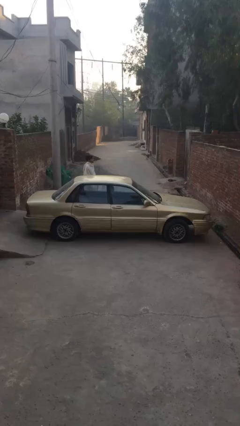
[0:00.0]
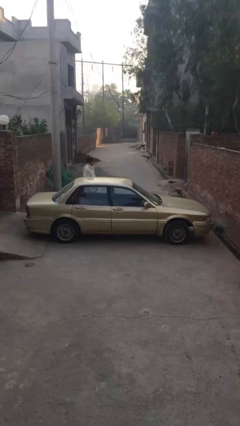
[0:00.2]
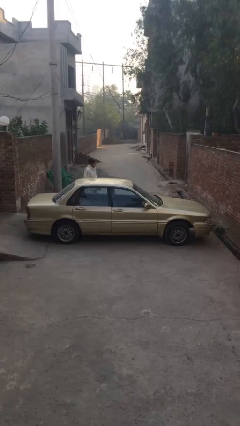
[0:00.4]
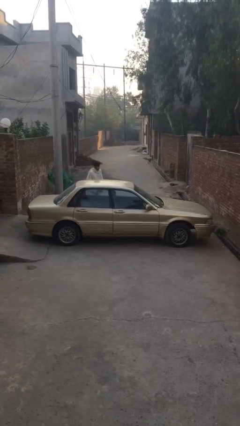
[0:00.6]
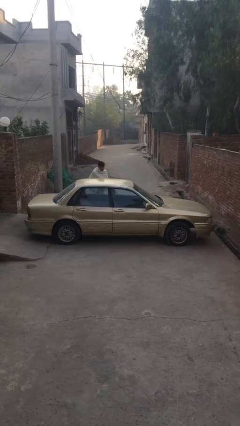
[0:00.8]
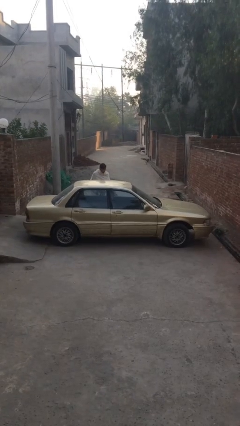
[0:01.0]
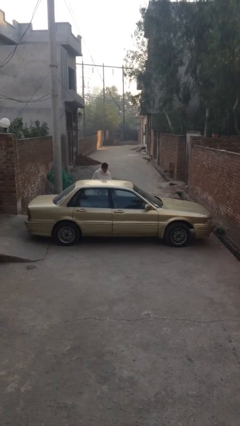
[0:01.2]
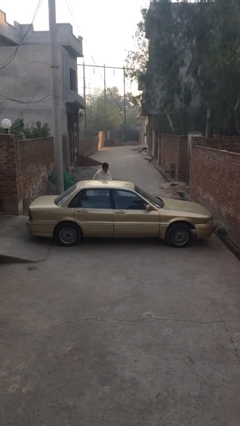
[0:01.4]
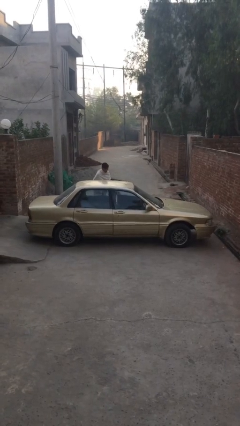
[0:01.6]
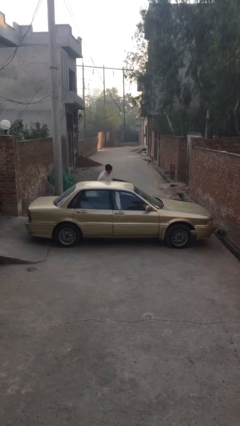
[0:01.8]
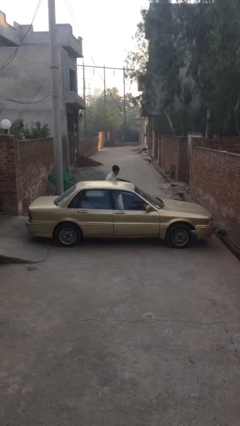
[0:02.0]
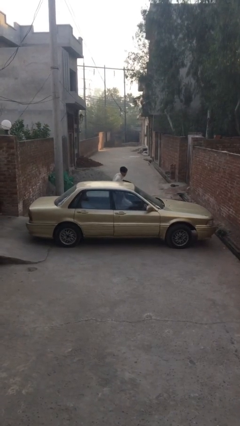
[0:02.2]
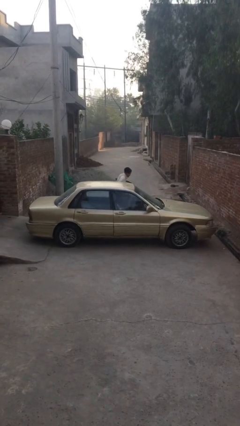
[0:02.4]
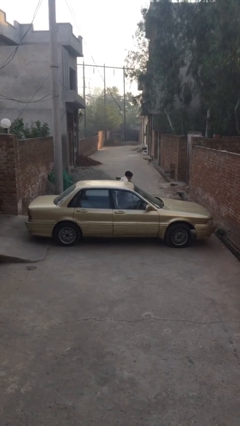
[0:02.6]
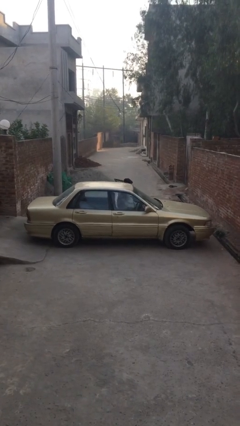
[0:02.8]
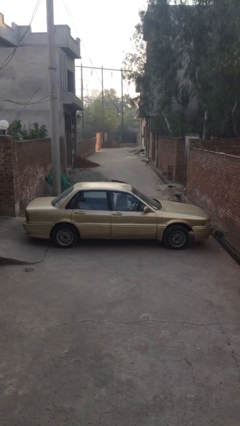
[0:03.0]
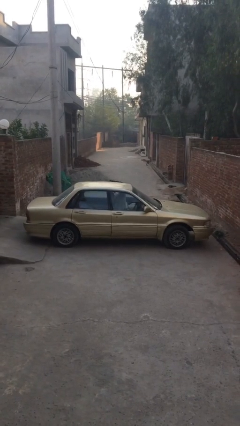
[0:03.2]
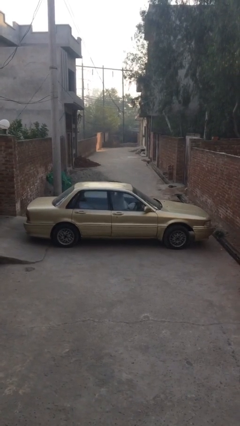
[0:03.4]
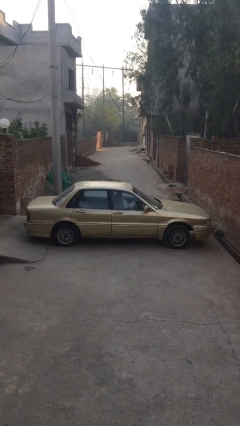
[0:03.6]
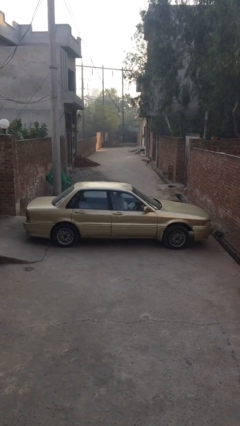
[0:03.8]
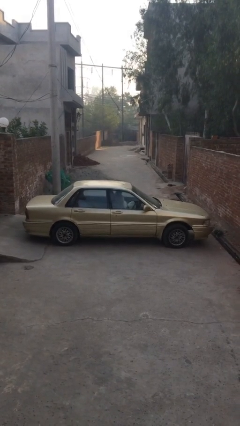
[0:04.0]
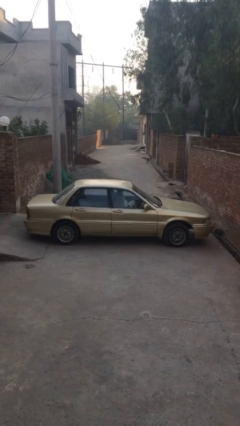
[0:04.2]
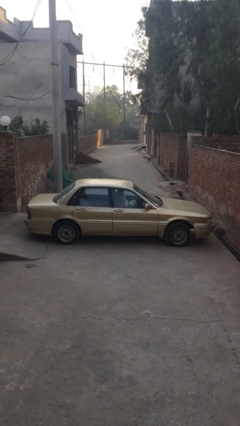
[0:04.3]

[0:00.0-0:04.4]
car picks up person

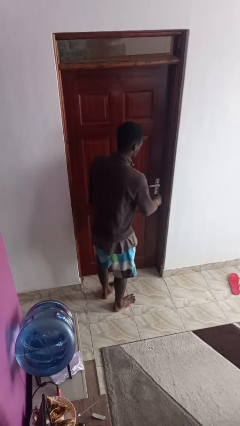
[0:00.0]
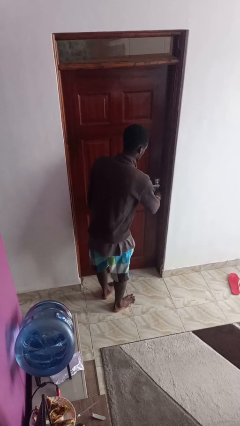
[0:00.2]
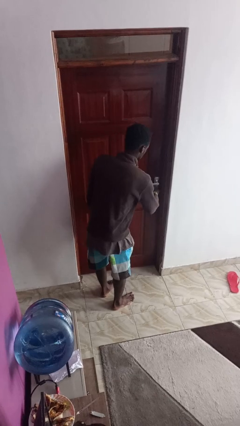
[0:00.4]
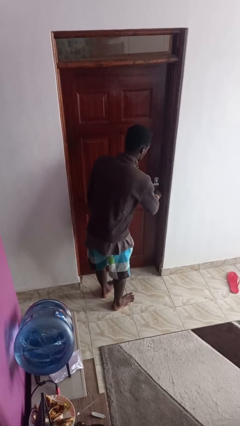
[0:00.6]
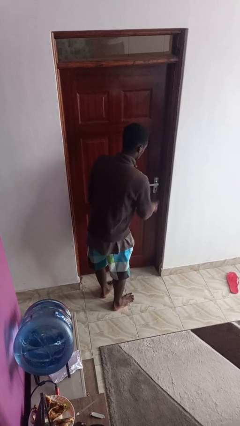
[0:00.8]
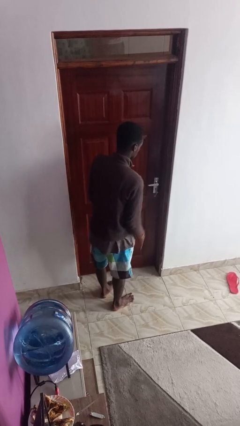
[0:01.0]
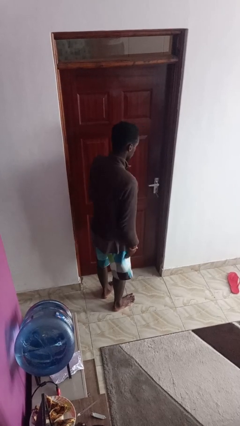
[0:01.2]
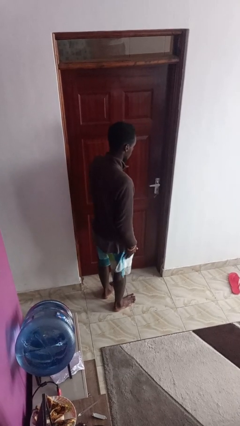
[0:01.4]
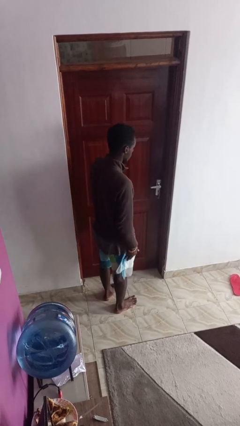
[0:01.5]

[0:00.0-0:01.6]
person locks door with keys

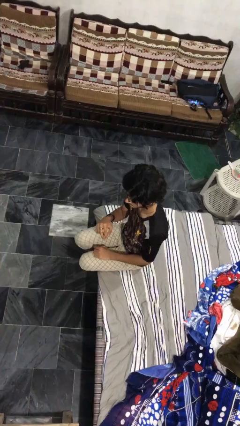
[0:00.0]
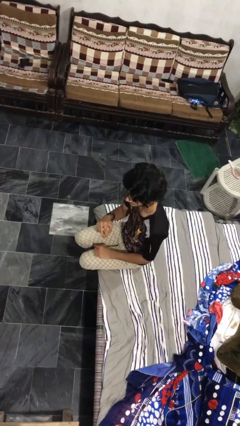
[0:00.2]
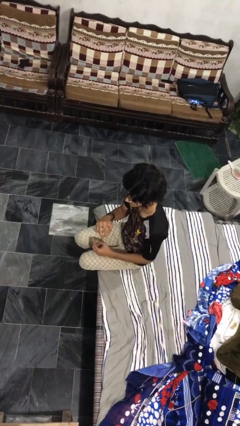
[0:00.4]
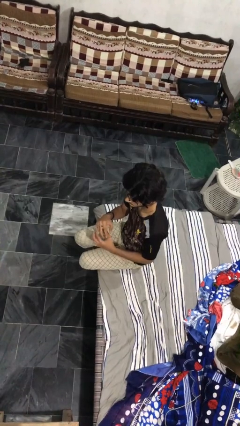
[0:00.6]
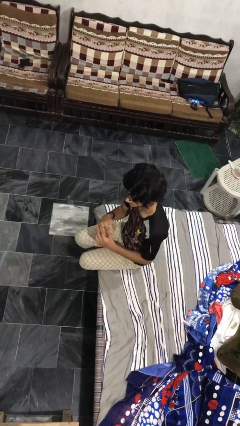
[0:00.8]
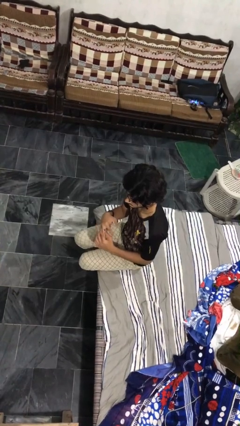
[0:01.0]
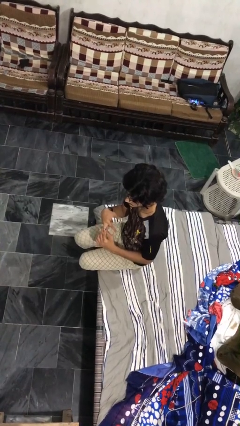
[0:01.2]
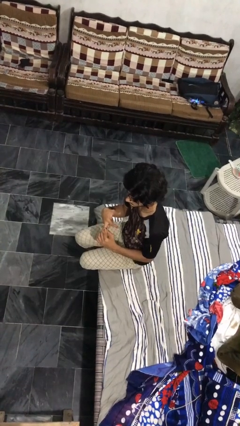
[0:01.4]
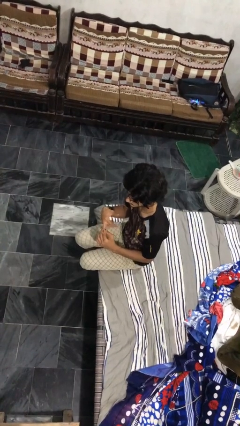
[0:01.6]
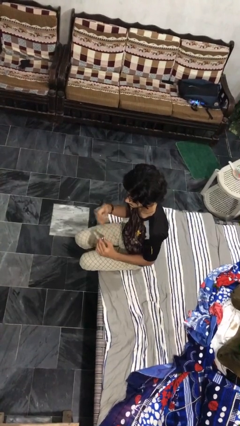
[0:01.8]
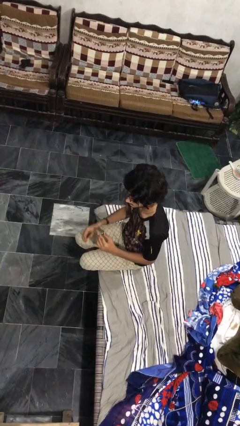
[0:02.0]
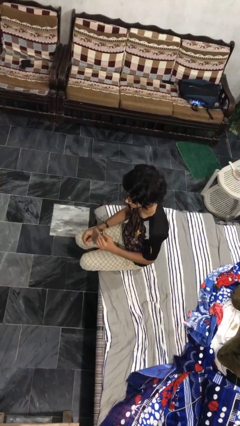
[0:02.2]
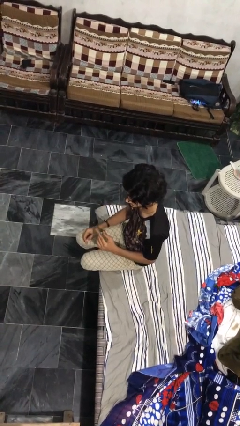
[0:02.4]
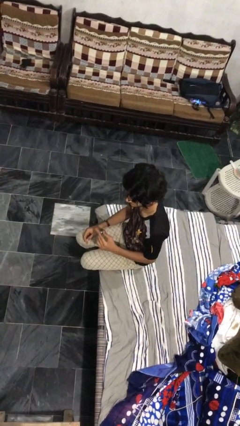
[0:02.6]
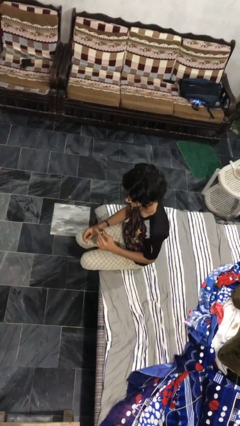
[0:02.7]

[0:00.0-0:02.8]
person takes off ring

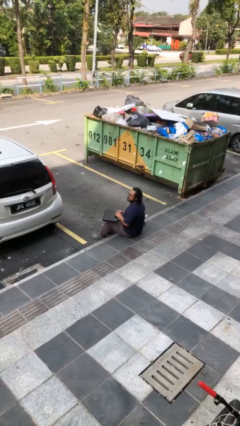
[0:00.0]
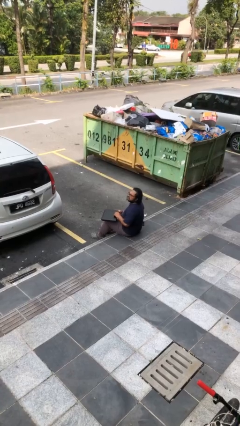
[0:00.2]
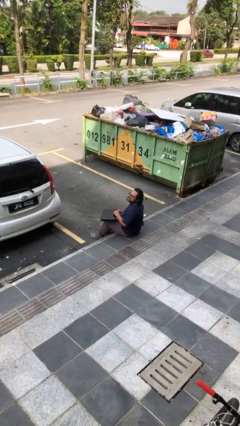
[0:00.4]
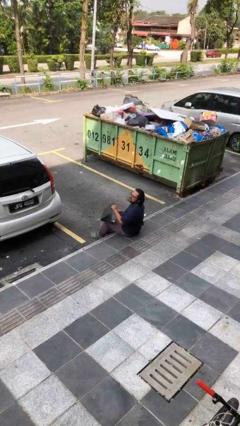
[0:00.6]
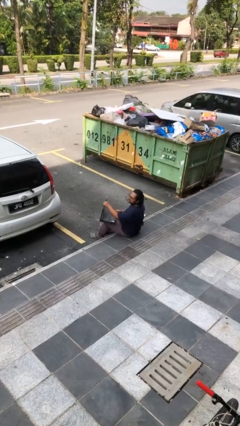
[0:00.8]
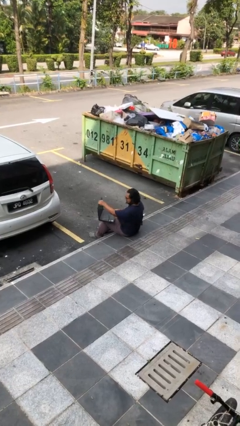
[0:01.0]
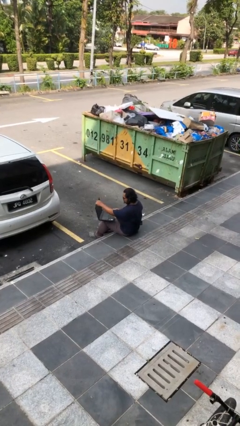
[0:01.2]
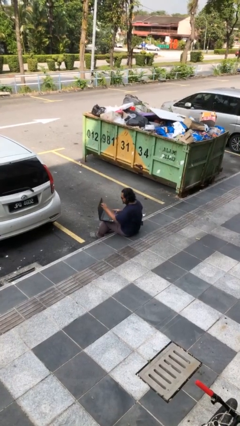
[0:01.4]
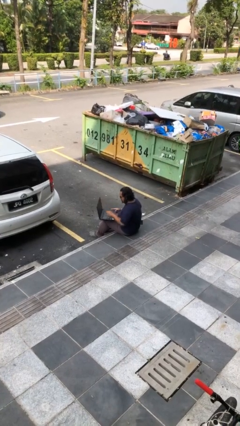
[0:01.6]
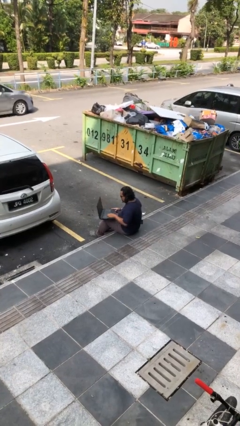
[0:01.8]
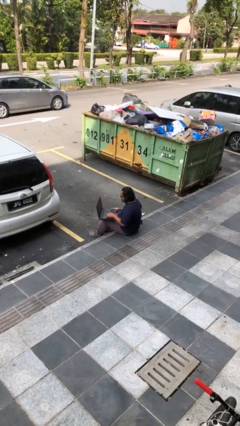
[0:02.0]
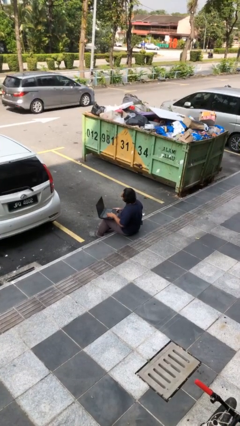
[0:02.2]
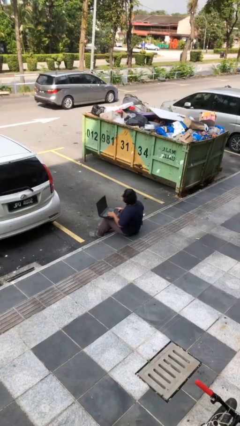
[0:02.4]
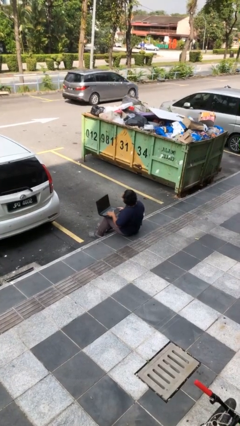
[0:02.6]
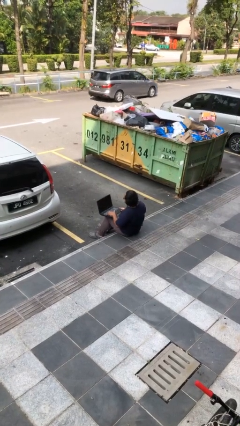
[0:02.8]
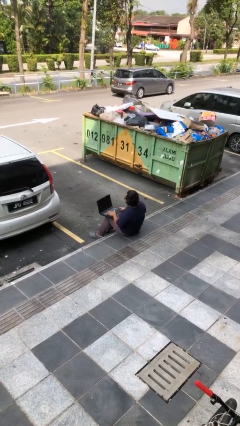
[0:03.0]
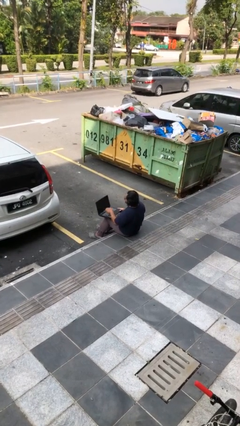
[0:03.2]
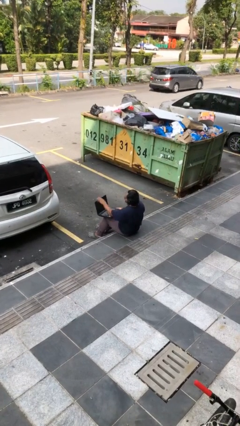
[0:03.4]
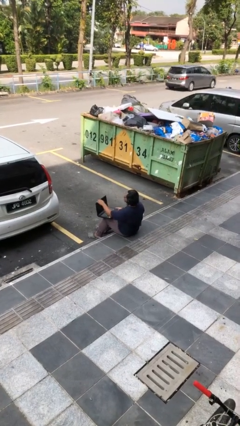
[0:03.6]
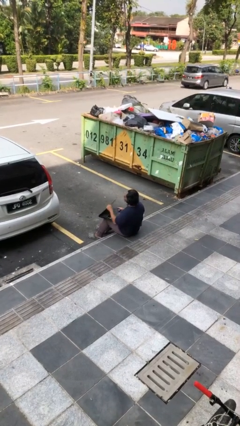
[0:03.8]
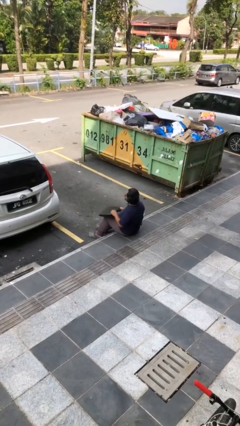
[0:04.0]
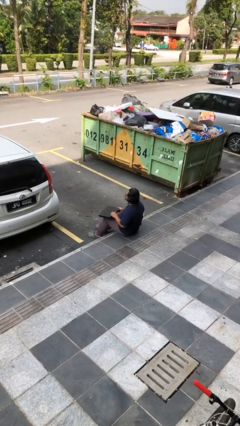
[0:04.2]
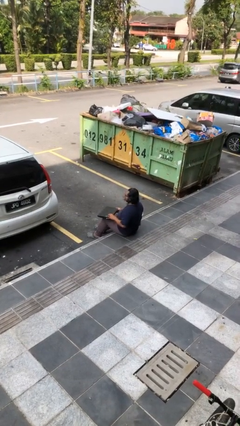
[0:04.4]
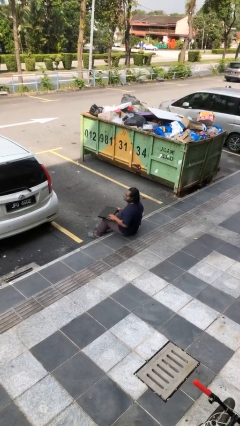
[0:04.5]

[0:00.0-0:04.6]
person interacts with laptop

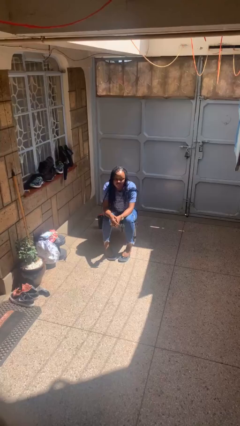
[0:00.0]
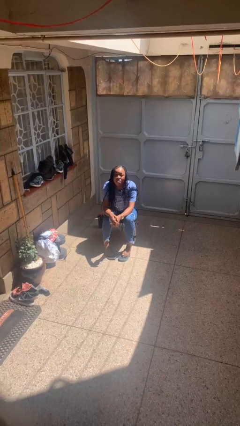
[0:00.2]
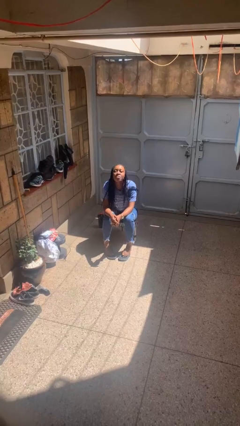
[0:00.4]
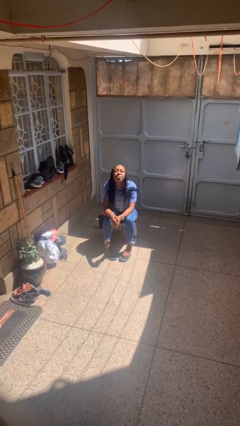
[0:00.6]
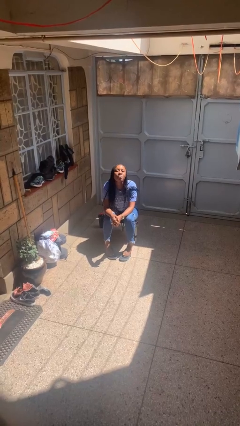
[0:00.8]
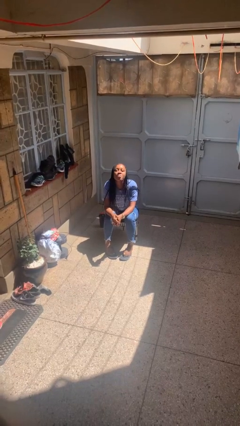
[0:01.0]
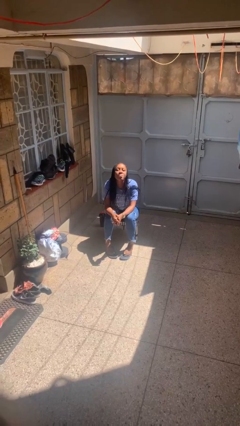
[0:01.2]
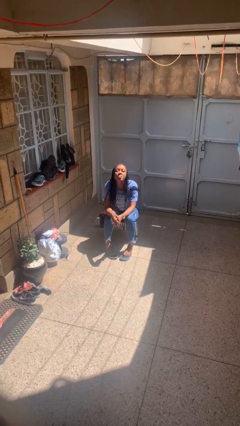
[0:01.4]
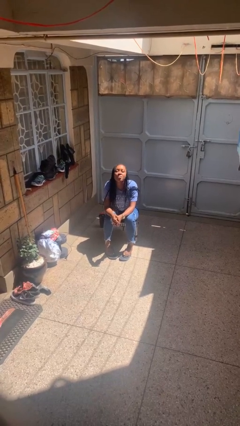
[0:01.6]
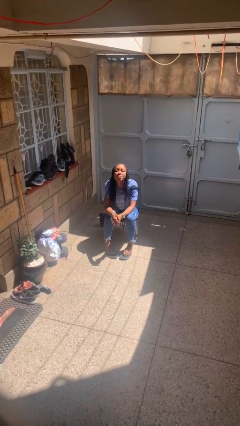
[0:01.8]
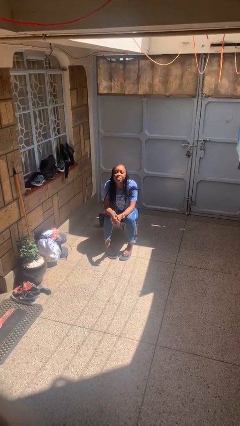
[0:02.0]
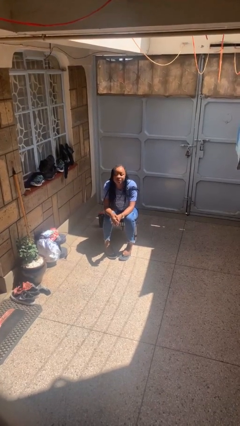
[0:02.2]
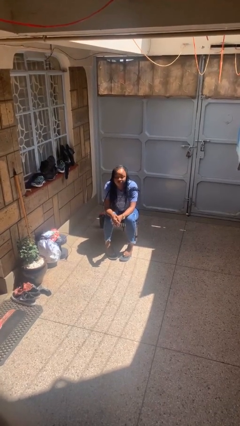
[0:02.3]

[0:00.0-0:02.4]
person sticks out tongue

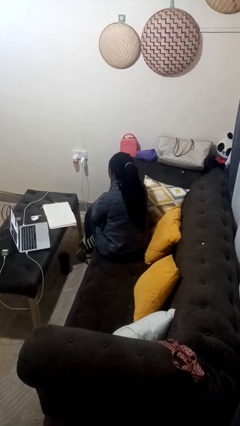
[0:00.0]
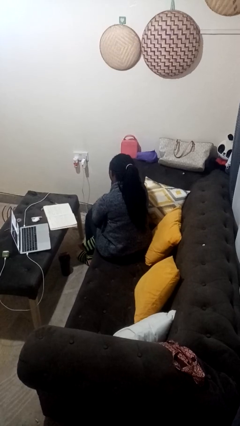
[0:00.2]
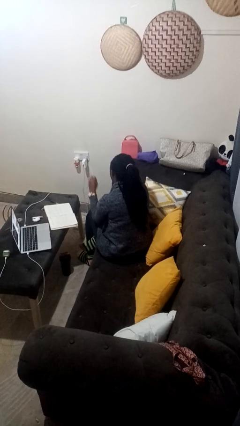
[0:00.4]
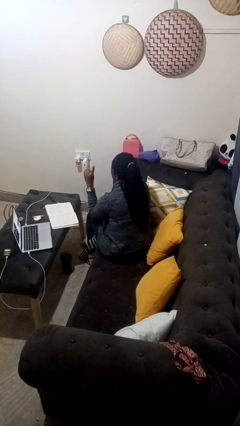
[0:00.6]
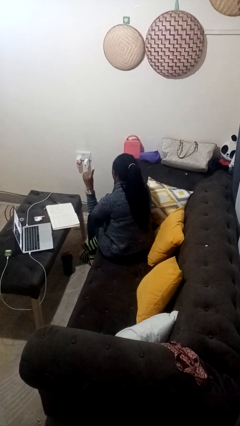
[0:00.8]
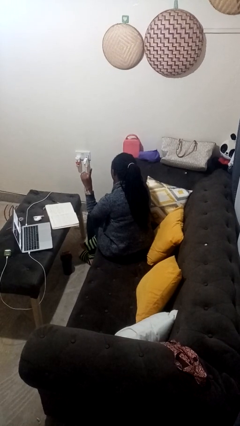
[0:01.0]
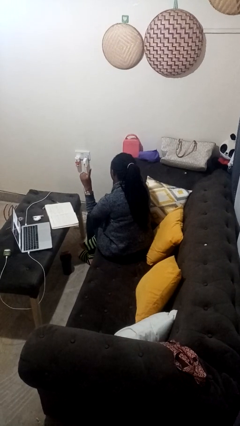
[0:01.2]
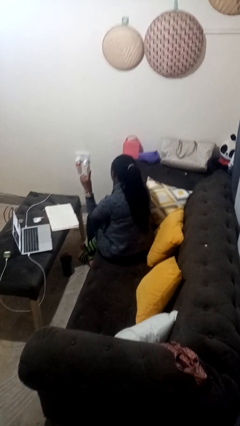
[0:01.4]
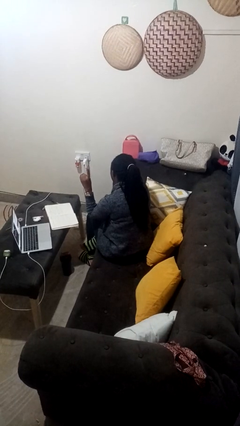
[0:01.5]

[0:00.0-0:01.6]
person gestures number one
